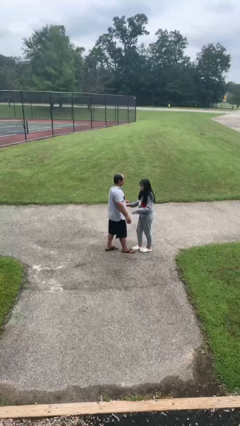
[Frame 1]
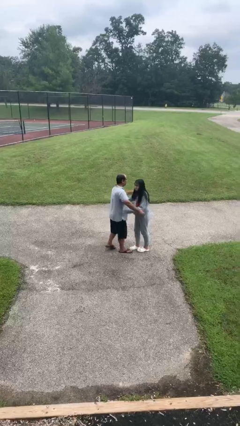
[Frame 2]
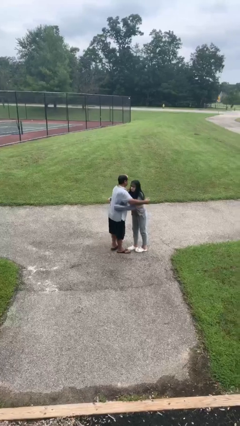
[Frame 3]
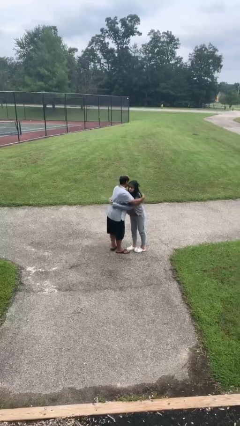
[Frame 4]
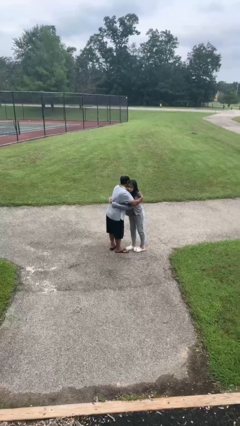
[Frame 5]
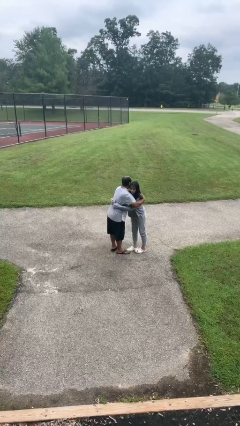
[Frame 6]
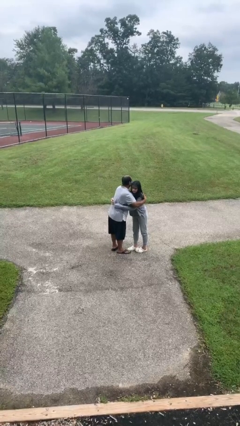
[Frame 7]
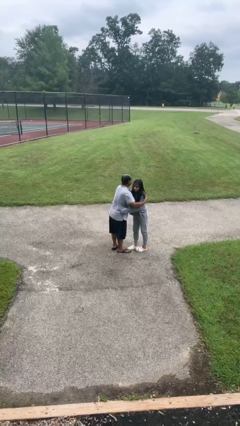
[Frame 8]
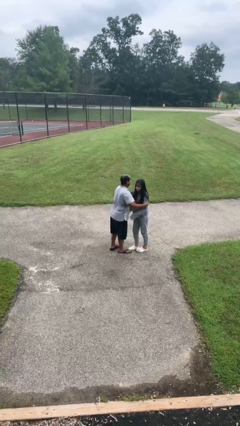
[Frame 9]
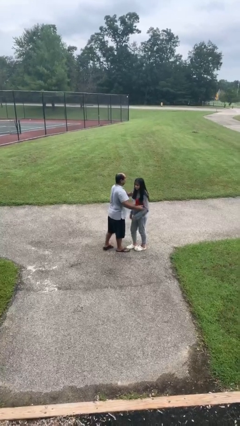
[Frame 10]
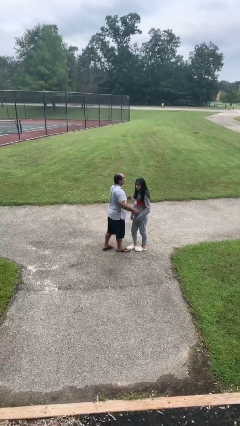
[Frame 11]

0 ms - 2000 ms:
person embraces person

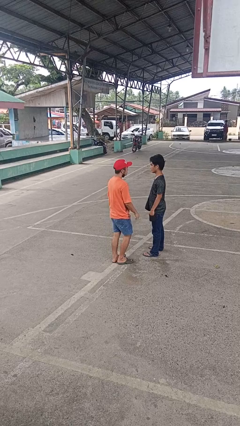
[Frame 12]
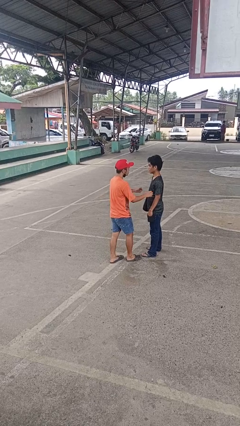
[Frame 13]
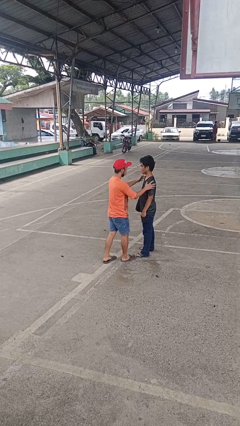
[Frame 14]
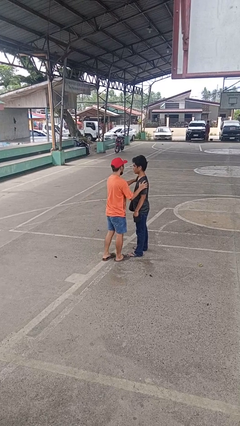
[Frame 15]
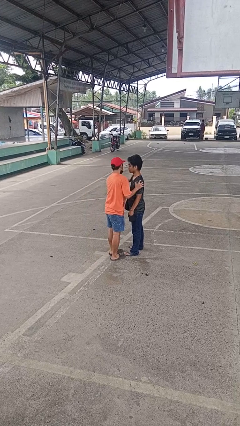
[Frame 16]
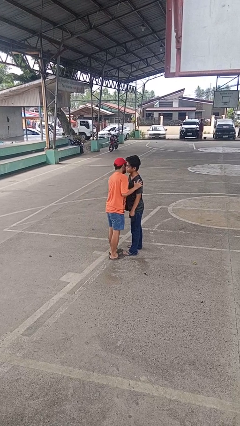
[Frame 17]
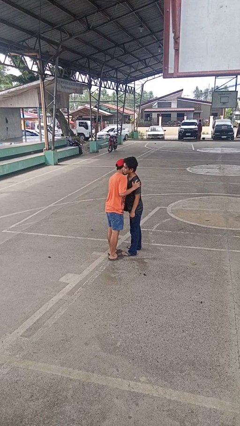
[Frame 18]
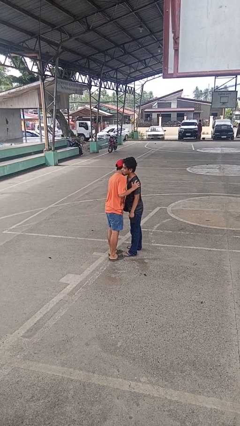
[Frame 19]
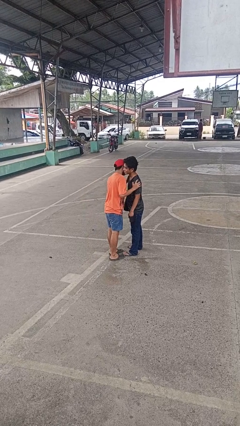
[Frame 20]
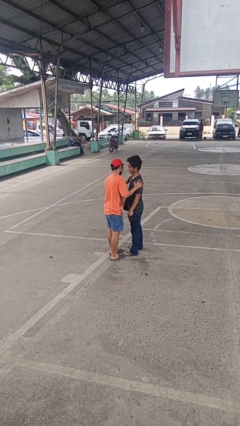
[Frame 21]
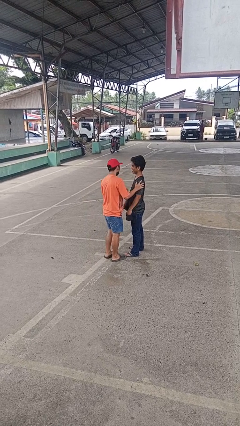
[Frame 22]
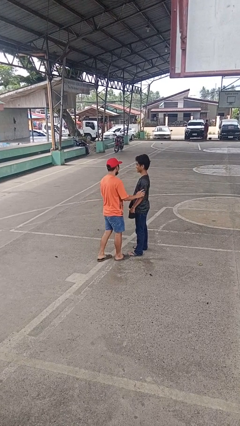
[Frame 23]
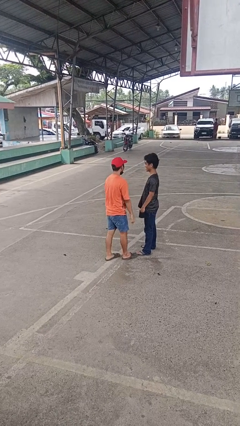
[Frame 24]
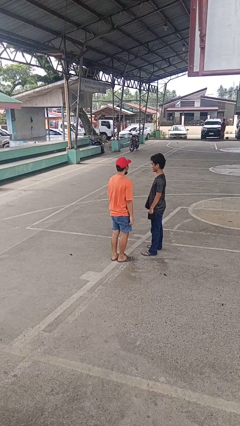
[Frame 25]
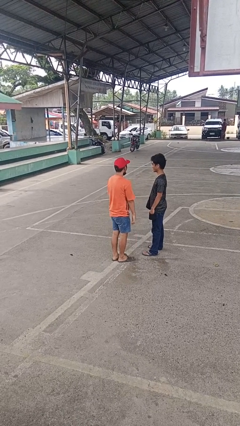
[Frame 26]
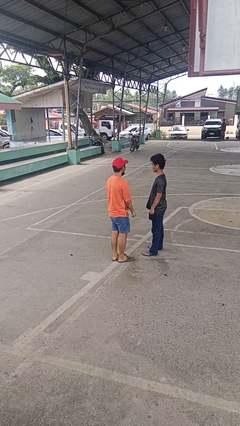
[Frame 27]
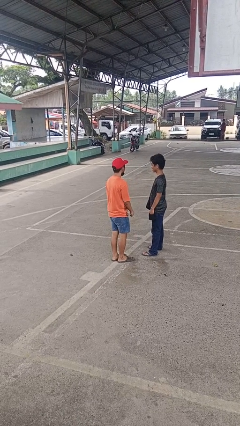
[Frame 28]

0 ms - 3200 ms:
person kisses cheek of person

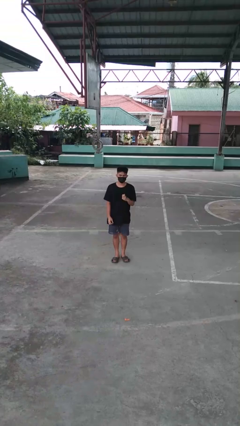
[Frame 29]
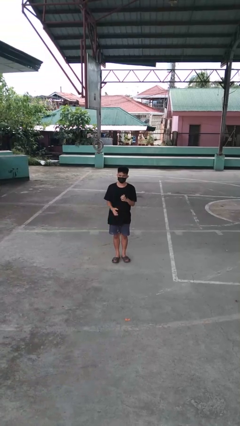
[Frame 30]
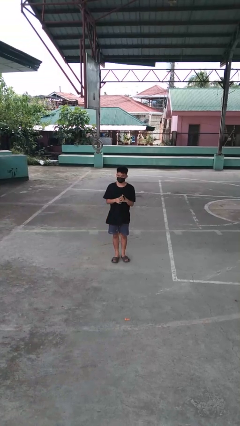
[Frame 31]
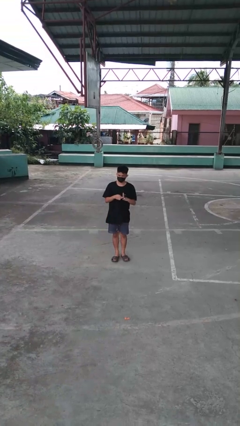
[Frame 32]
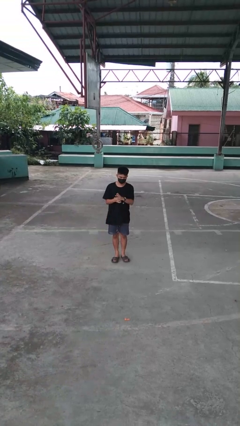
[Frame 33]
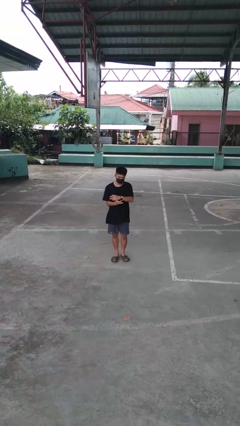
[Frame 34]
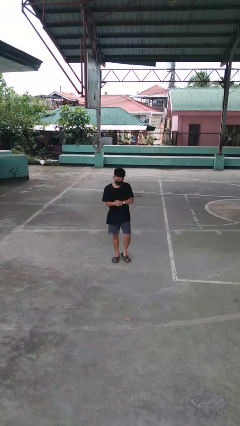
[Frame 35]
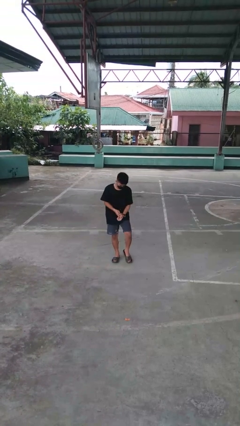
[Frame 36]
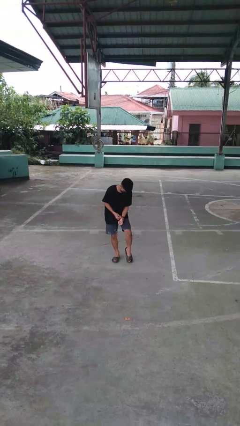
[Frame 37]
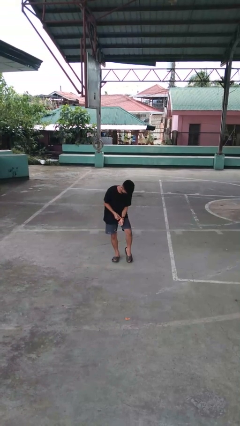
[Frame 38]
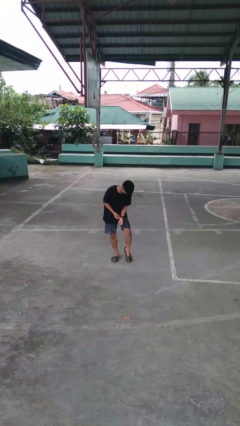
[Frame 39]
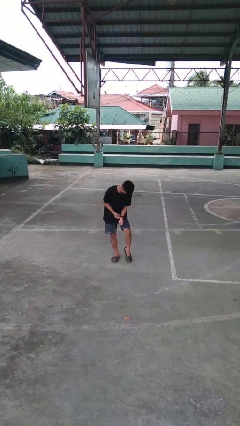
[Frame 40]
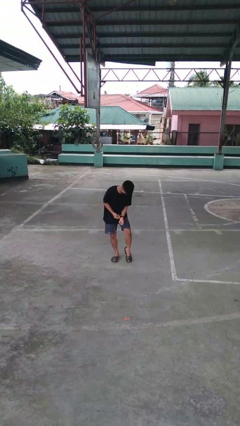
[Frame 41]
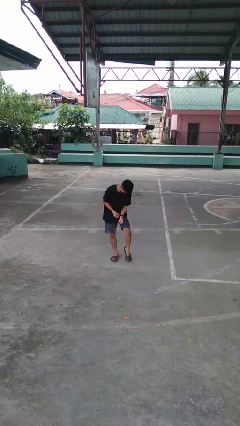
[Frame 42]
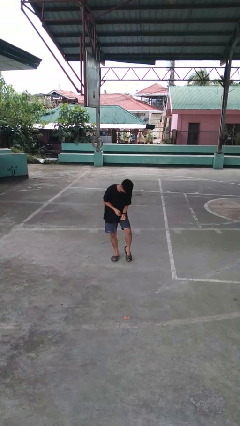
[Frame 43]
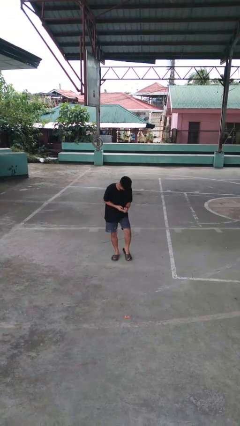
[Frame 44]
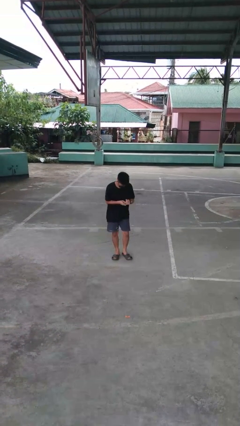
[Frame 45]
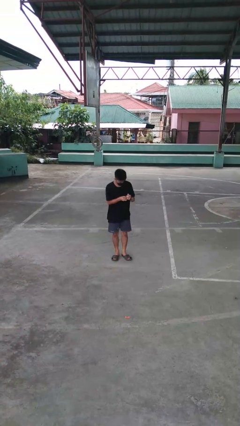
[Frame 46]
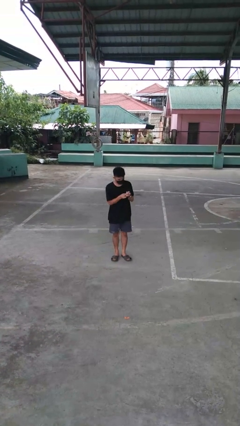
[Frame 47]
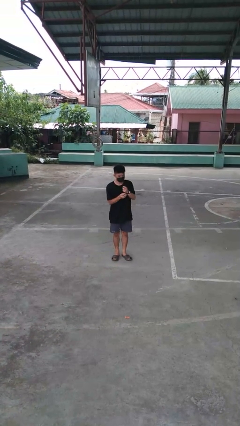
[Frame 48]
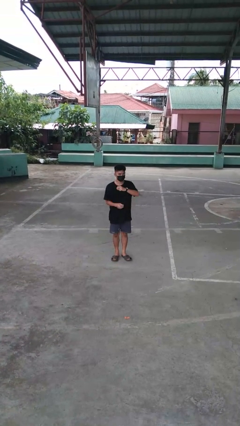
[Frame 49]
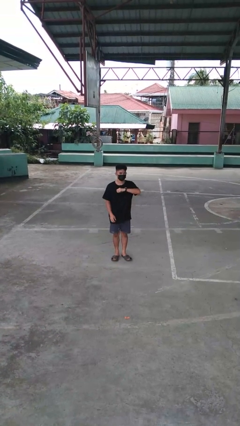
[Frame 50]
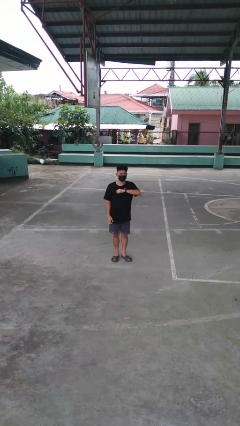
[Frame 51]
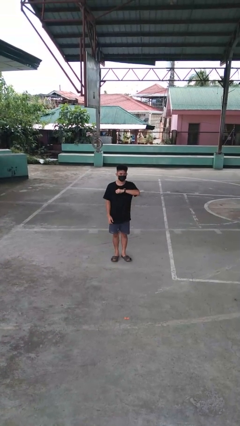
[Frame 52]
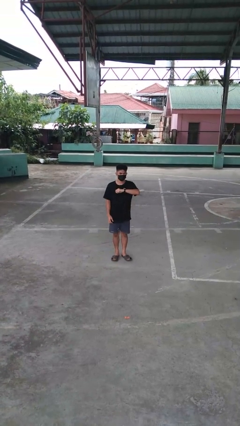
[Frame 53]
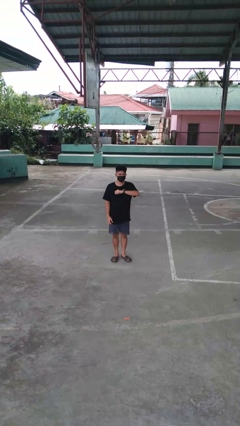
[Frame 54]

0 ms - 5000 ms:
person puts on wristwatch

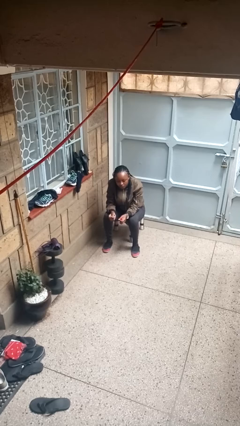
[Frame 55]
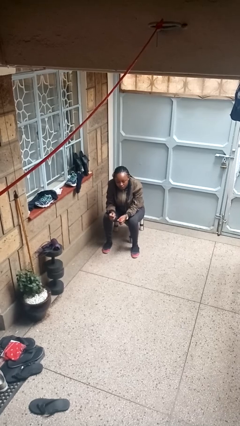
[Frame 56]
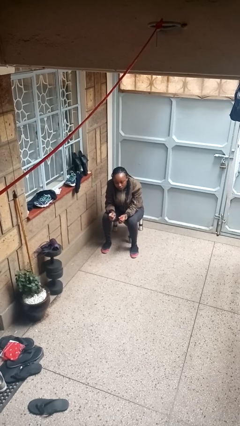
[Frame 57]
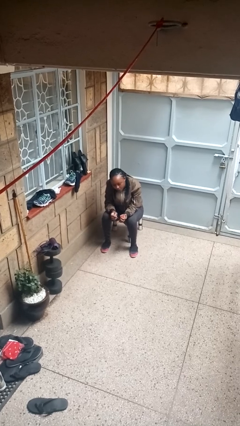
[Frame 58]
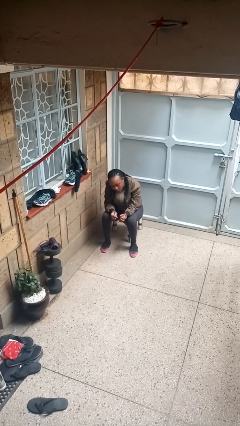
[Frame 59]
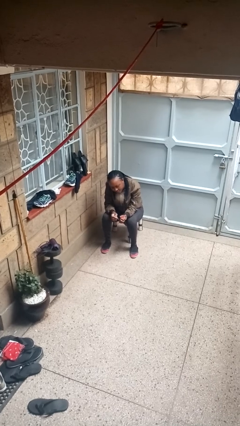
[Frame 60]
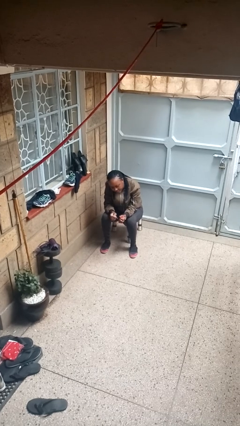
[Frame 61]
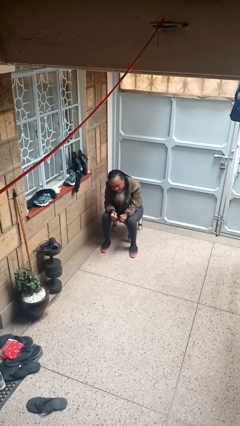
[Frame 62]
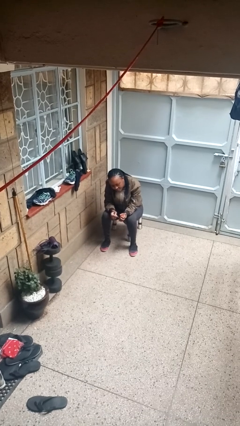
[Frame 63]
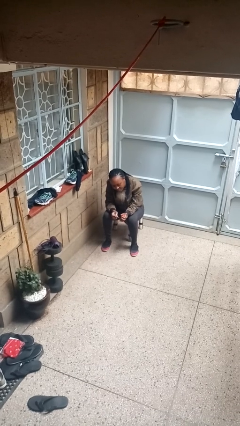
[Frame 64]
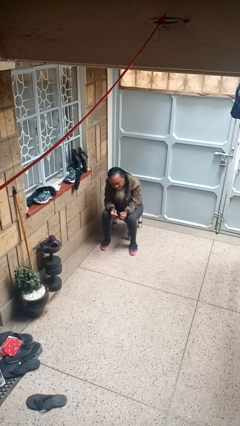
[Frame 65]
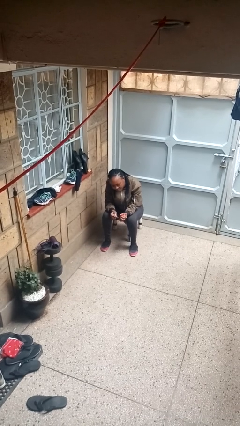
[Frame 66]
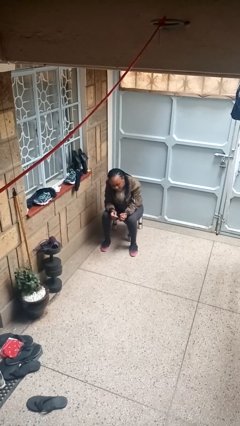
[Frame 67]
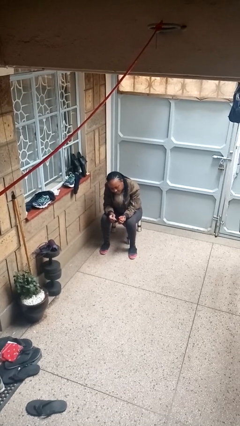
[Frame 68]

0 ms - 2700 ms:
person paints fingernails

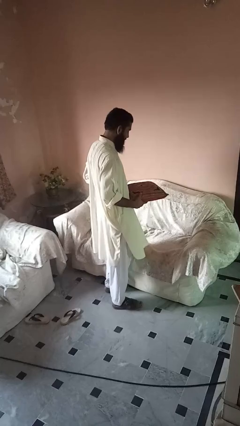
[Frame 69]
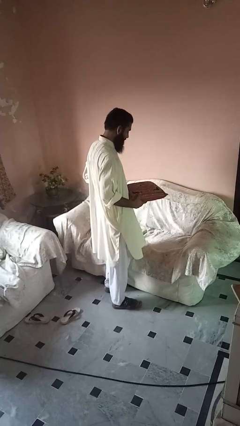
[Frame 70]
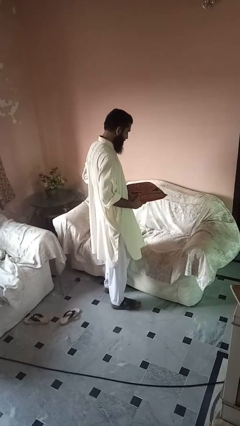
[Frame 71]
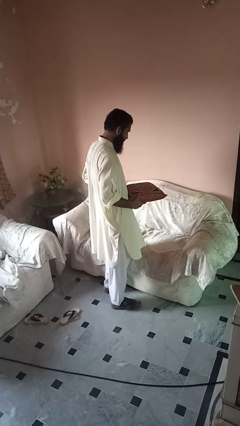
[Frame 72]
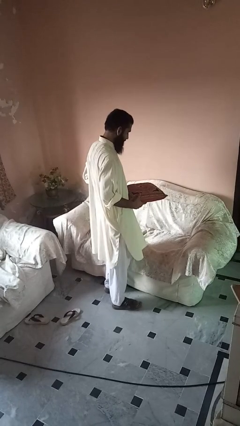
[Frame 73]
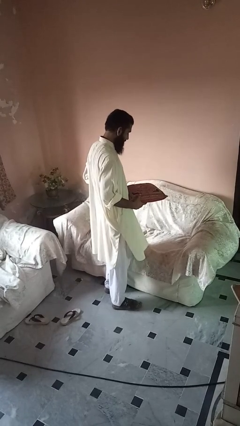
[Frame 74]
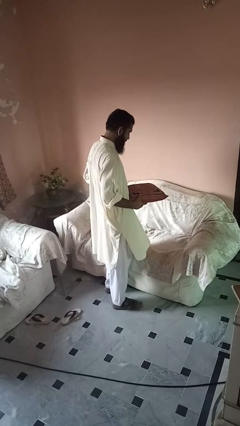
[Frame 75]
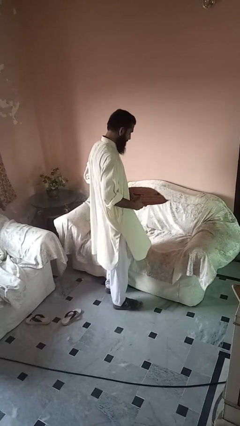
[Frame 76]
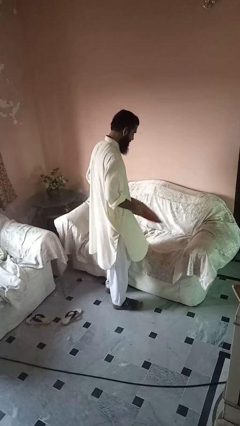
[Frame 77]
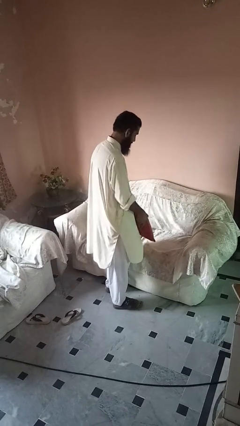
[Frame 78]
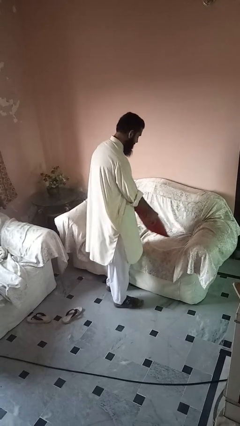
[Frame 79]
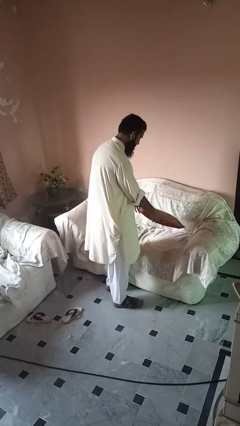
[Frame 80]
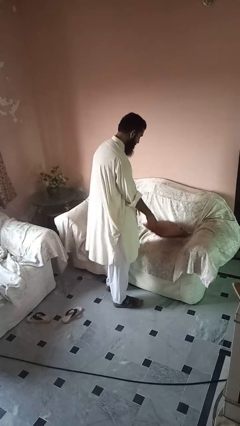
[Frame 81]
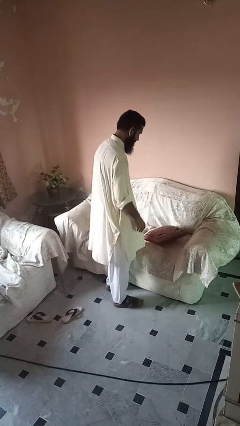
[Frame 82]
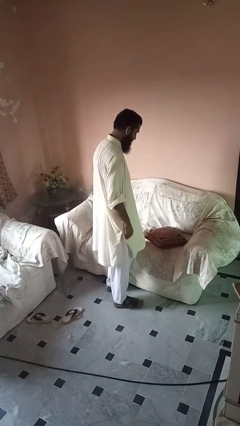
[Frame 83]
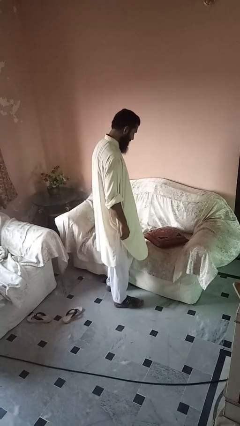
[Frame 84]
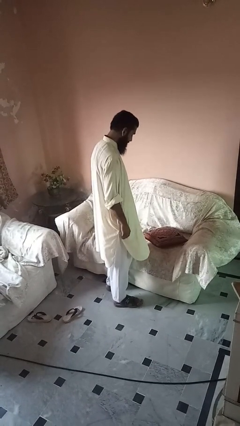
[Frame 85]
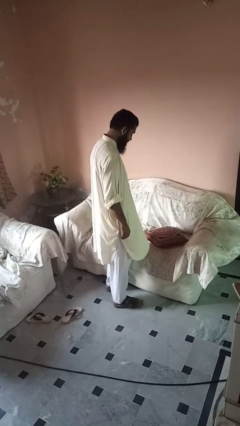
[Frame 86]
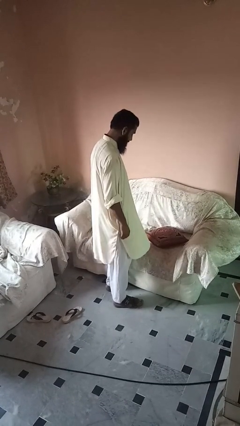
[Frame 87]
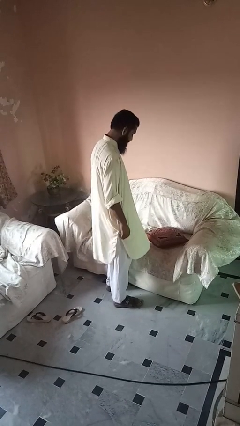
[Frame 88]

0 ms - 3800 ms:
person puts down object on couch

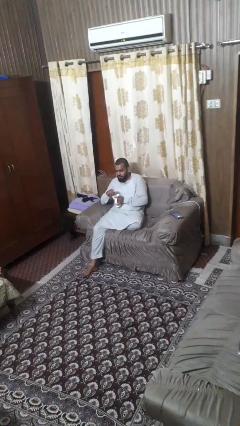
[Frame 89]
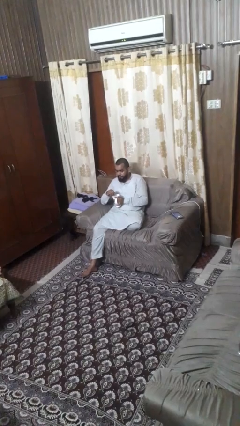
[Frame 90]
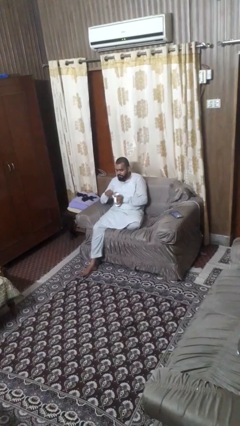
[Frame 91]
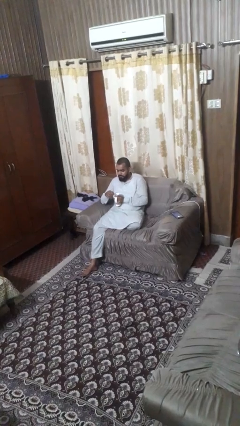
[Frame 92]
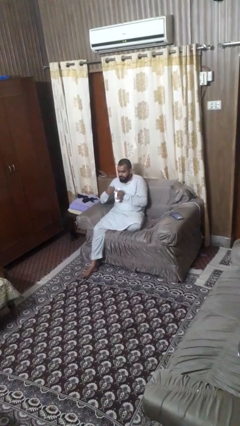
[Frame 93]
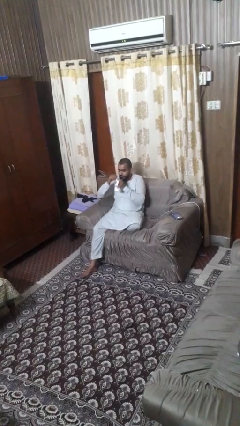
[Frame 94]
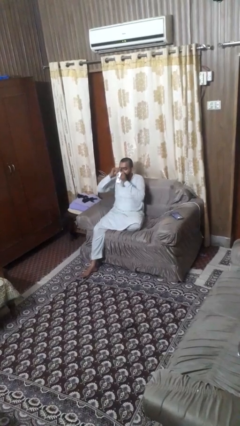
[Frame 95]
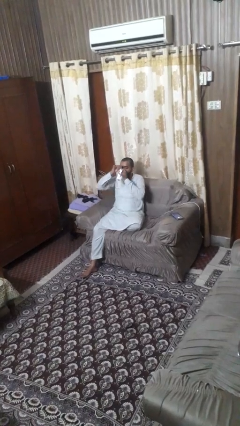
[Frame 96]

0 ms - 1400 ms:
person stirs mug
